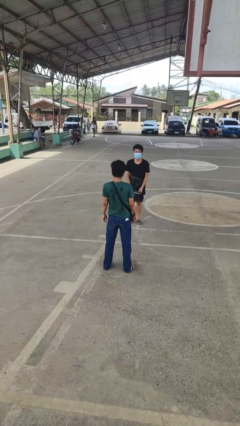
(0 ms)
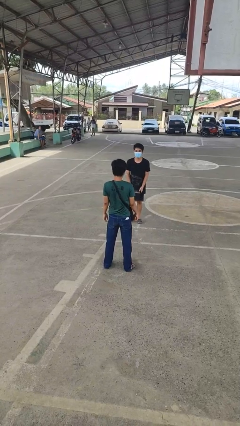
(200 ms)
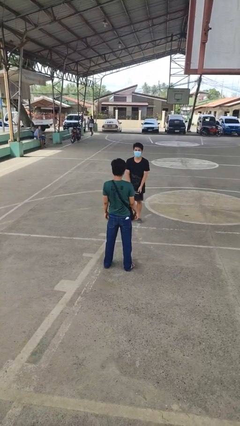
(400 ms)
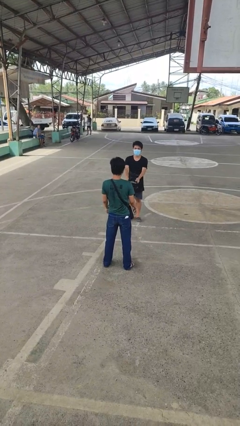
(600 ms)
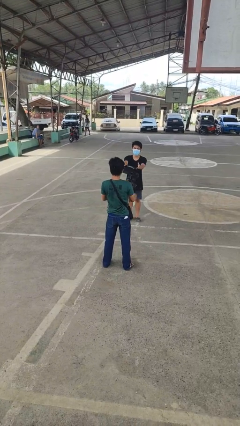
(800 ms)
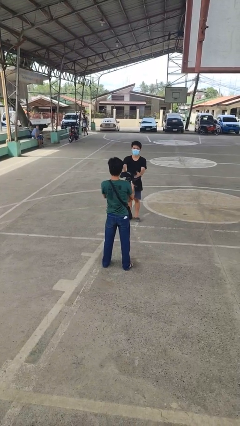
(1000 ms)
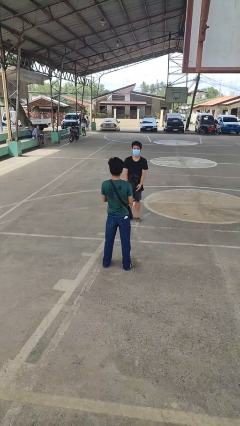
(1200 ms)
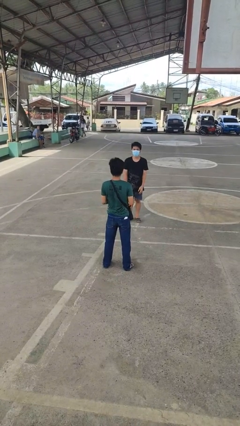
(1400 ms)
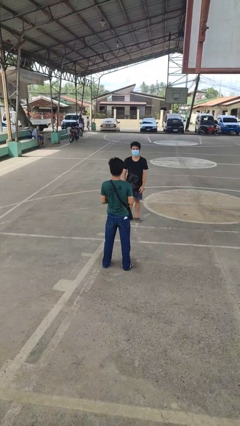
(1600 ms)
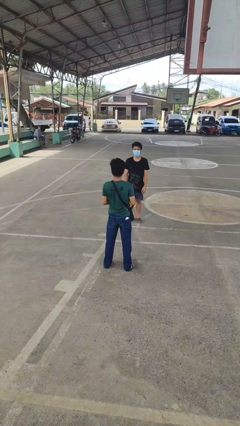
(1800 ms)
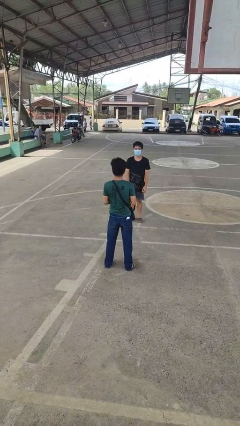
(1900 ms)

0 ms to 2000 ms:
person catches object from person

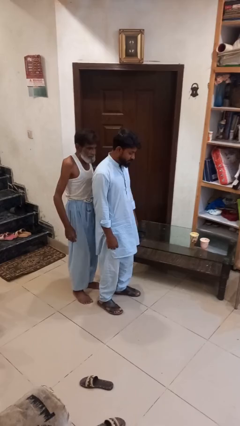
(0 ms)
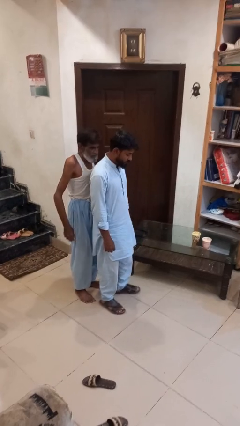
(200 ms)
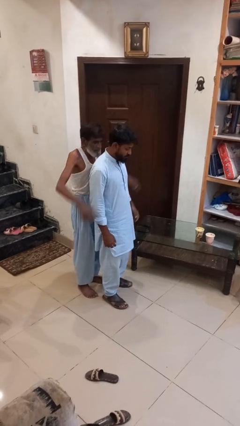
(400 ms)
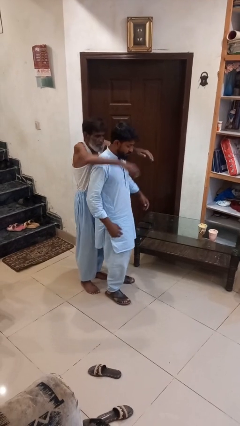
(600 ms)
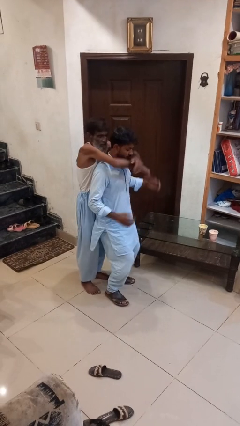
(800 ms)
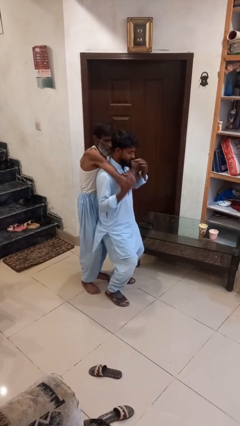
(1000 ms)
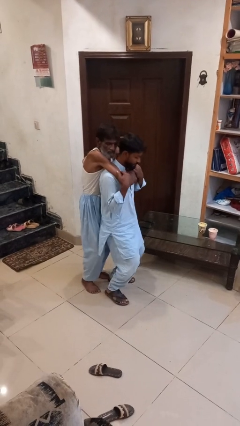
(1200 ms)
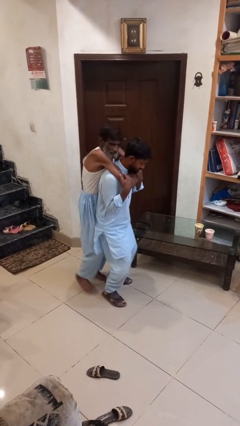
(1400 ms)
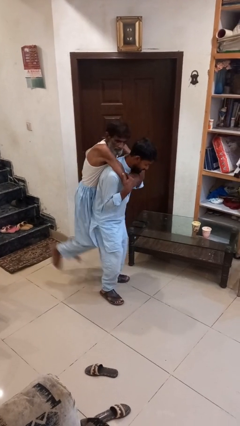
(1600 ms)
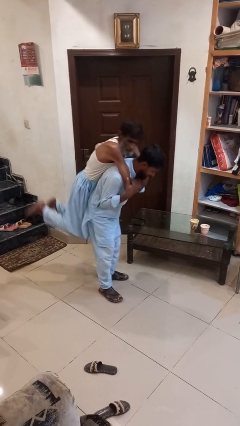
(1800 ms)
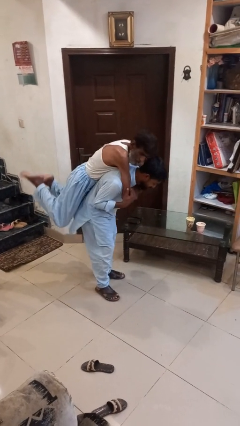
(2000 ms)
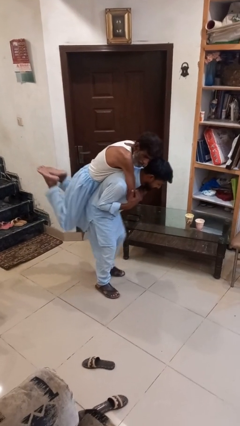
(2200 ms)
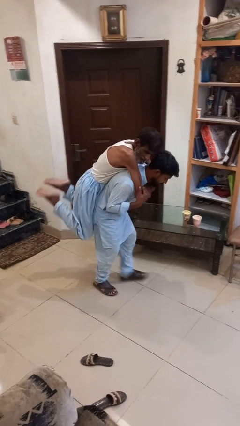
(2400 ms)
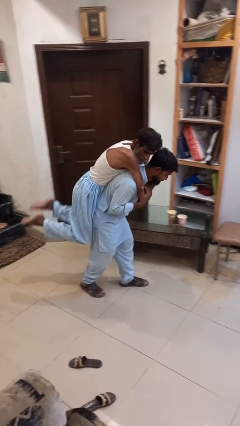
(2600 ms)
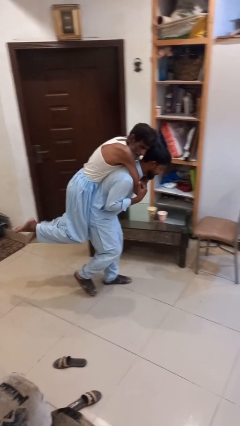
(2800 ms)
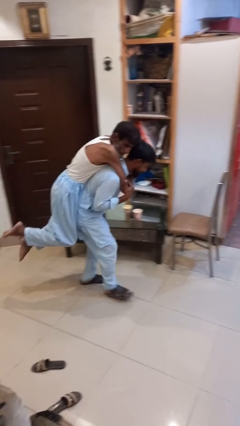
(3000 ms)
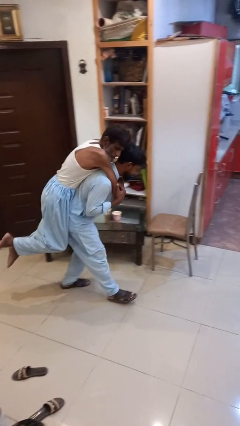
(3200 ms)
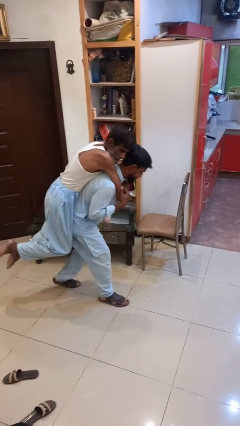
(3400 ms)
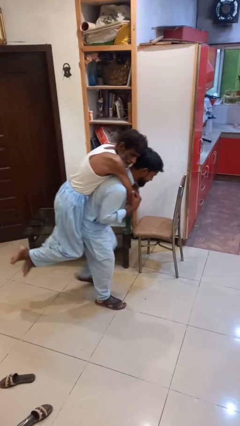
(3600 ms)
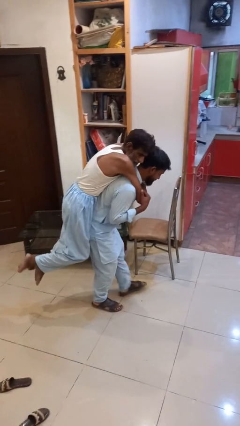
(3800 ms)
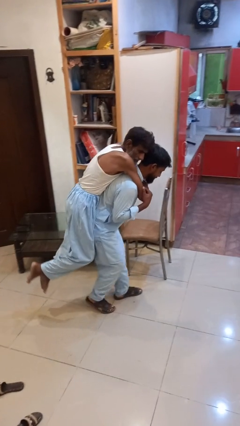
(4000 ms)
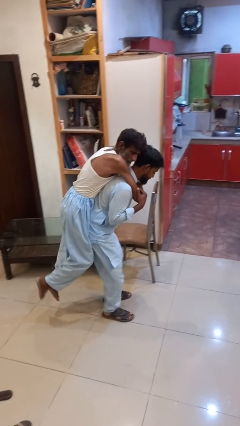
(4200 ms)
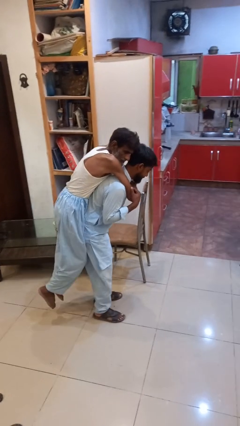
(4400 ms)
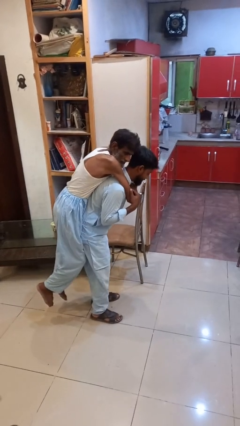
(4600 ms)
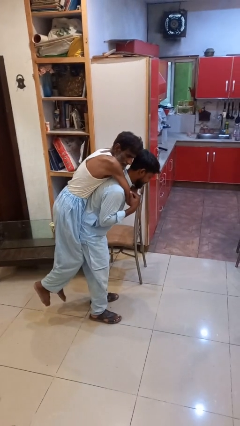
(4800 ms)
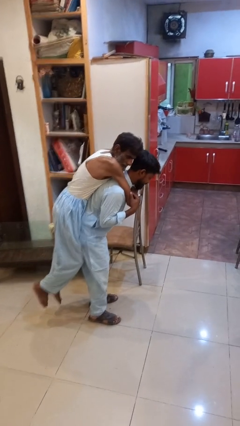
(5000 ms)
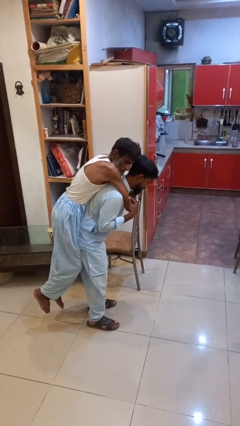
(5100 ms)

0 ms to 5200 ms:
person carries person over shoulder

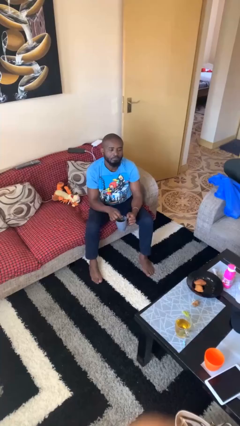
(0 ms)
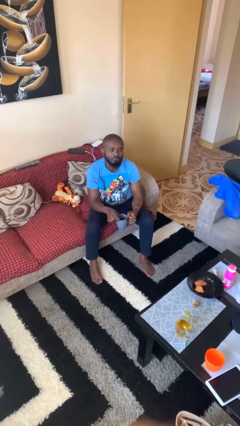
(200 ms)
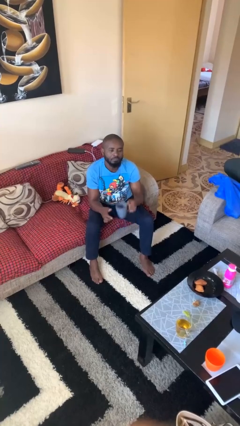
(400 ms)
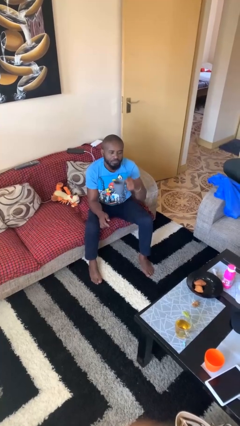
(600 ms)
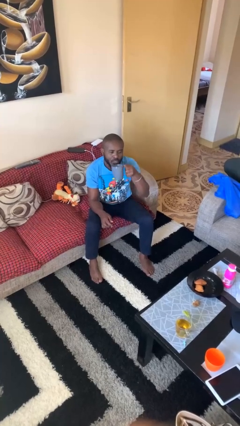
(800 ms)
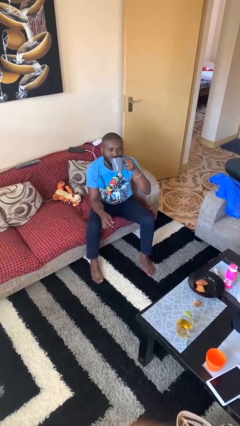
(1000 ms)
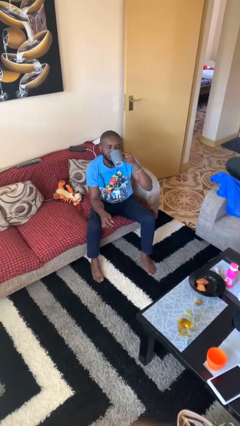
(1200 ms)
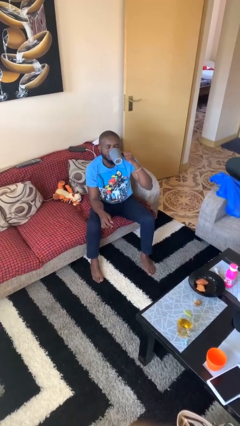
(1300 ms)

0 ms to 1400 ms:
person drinks from mug

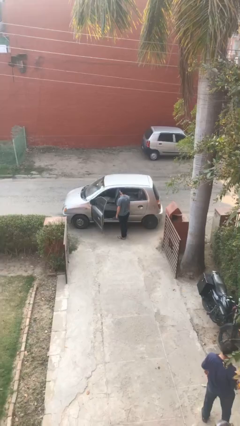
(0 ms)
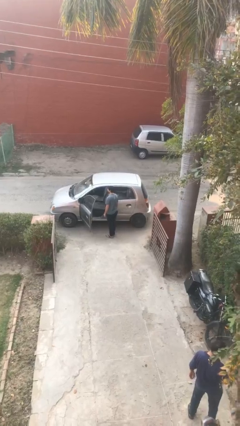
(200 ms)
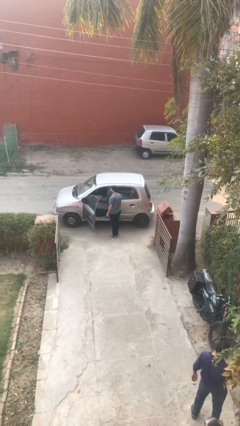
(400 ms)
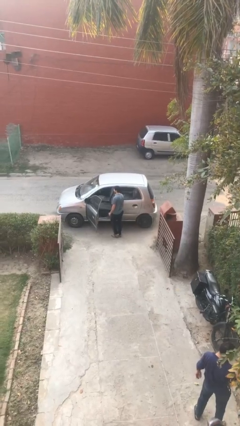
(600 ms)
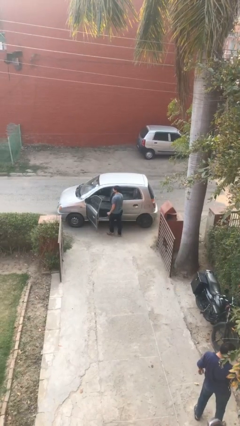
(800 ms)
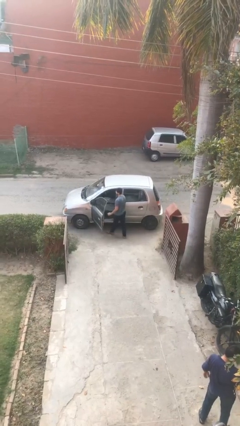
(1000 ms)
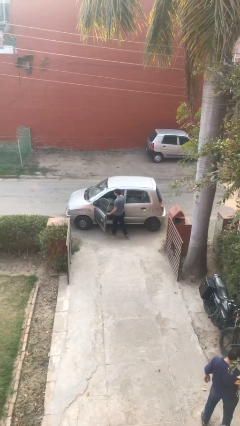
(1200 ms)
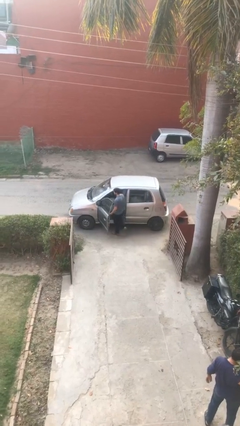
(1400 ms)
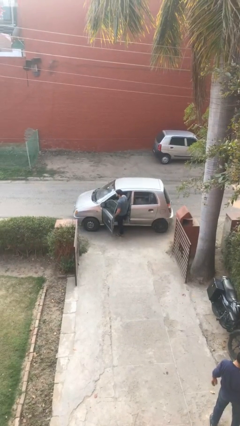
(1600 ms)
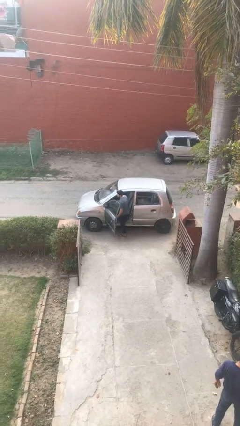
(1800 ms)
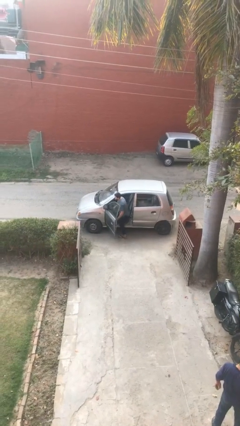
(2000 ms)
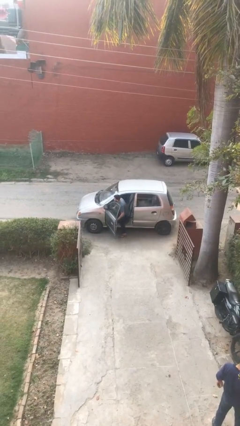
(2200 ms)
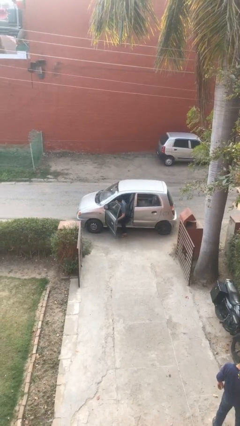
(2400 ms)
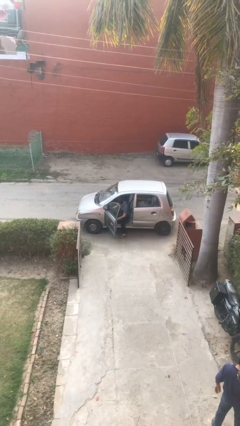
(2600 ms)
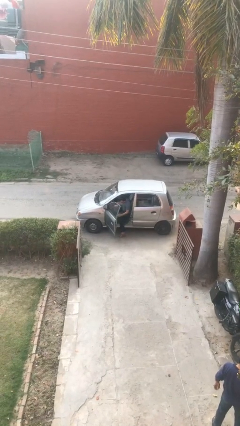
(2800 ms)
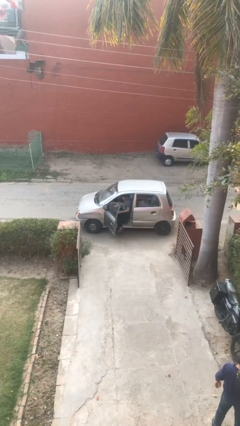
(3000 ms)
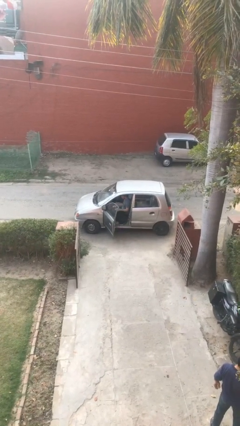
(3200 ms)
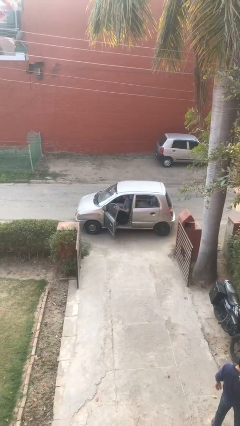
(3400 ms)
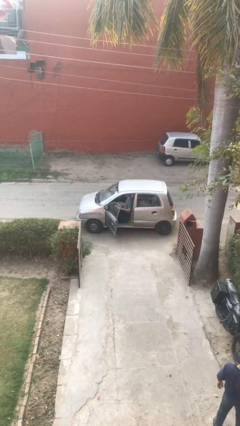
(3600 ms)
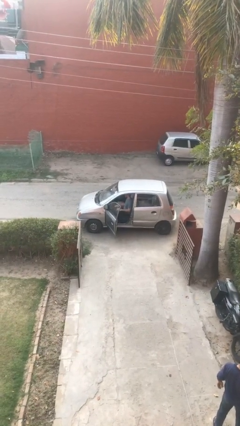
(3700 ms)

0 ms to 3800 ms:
person enters car

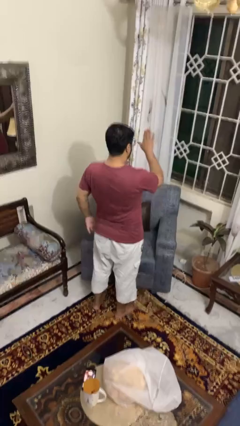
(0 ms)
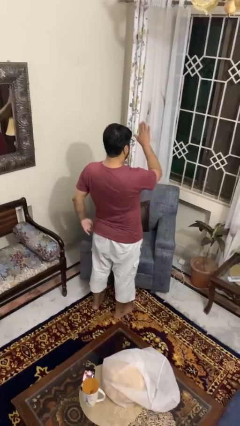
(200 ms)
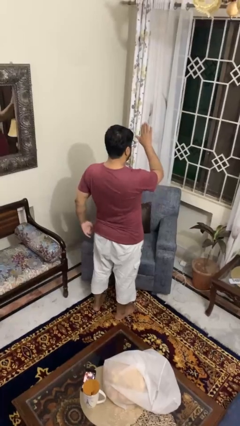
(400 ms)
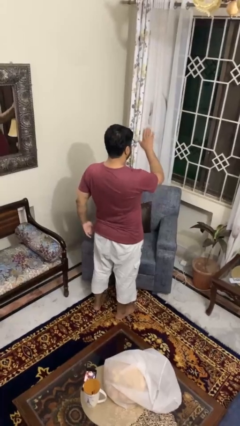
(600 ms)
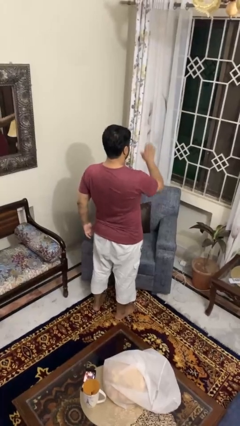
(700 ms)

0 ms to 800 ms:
person gestures stop

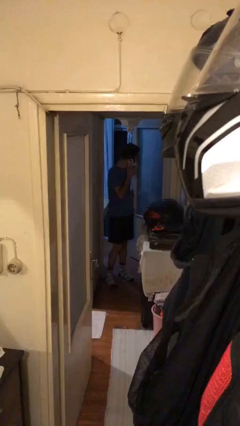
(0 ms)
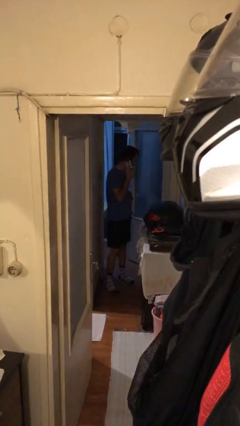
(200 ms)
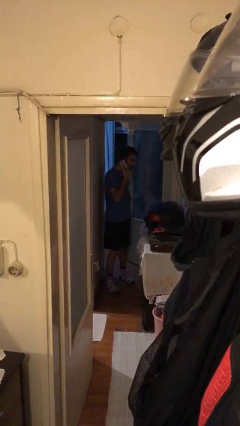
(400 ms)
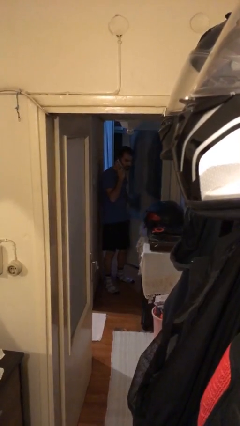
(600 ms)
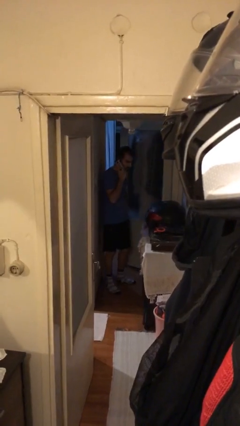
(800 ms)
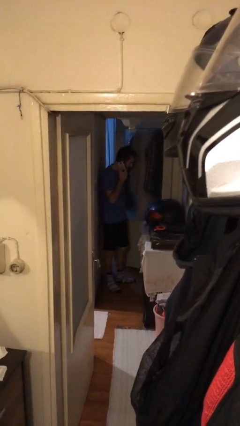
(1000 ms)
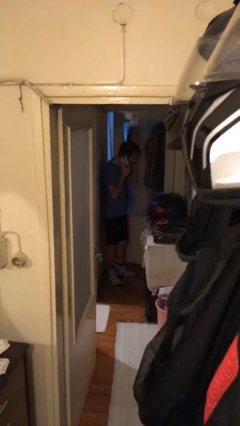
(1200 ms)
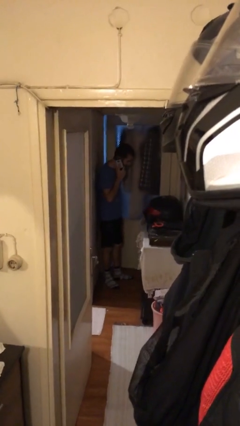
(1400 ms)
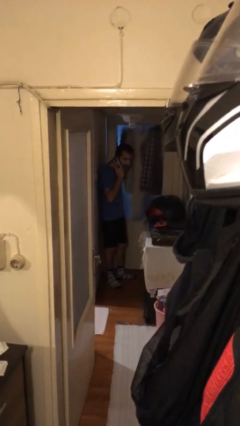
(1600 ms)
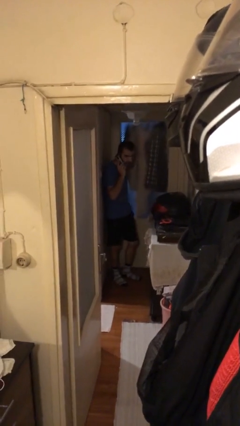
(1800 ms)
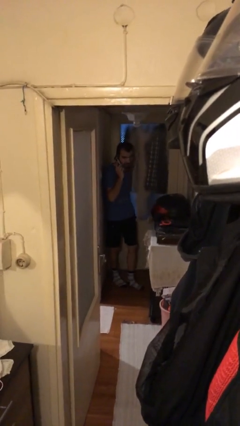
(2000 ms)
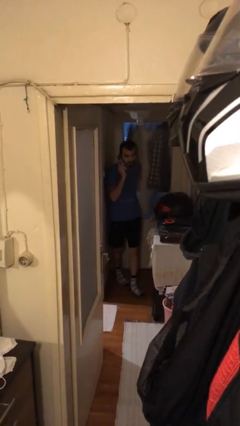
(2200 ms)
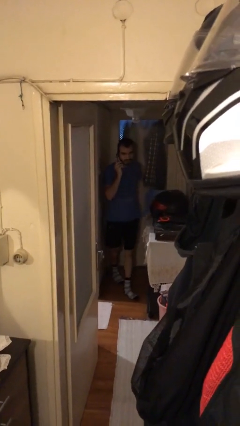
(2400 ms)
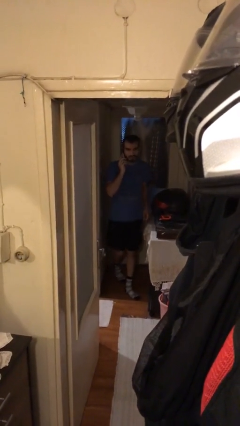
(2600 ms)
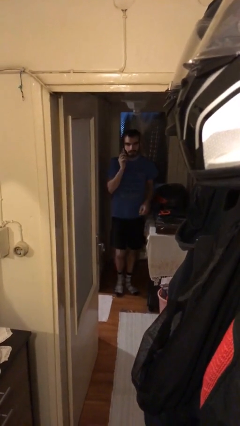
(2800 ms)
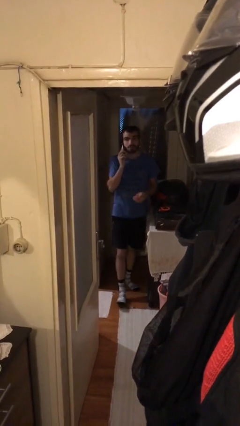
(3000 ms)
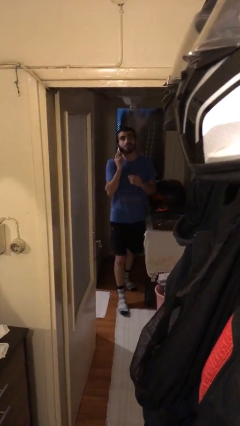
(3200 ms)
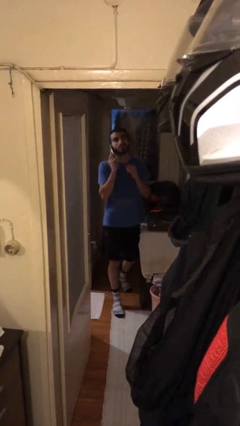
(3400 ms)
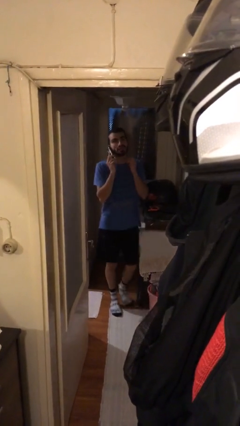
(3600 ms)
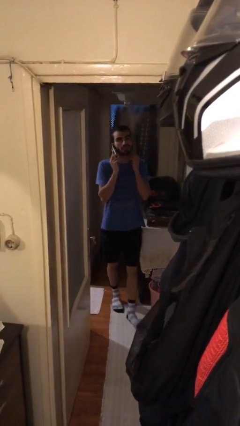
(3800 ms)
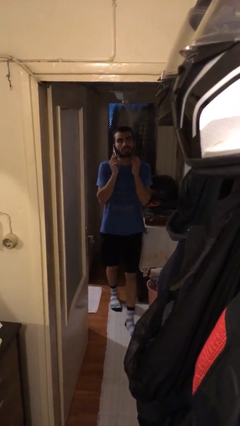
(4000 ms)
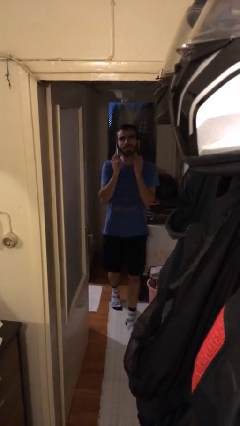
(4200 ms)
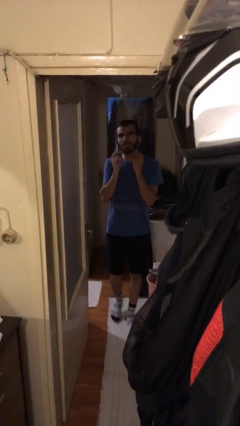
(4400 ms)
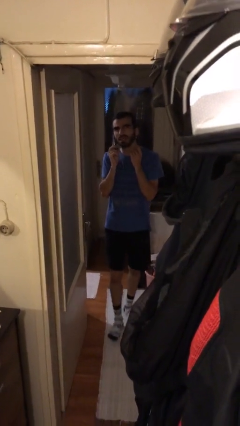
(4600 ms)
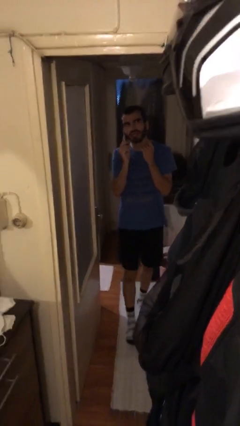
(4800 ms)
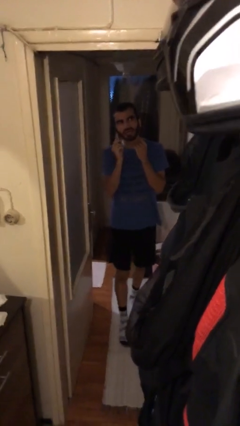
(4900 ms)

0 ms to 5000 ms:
person closes facility door
